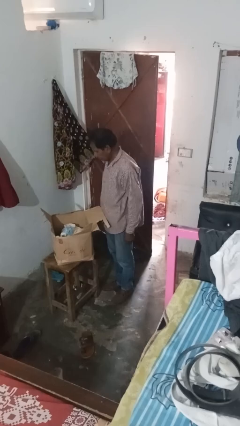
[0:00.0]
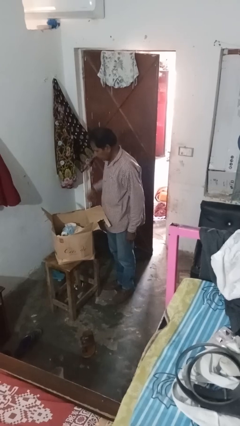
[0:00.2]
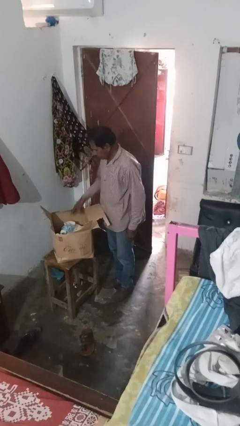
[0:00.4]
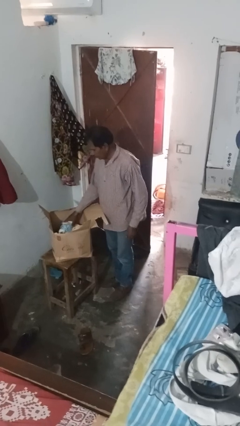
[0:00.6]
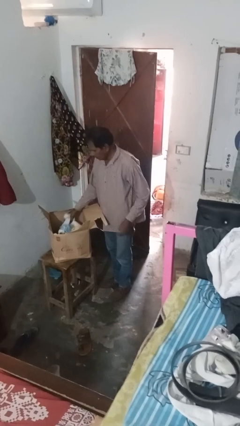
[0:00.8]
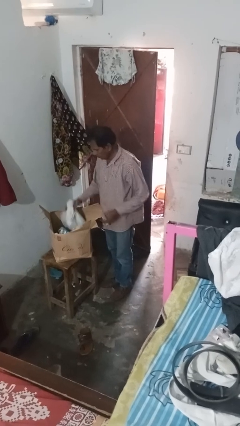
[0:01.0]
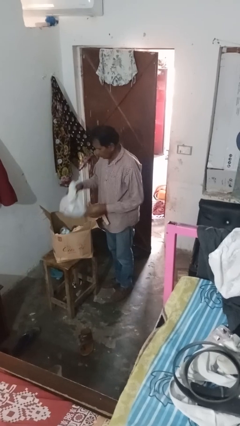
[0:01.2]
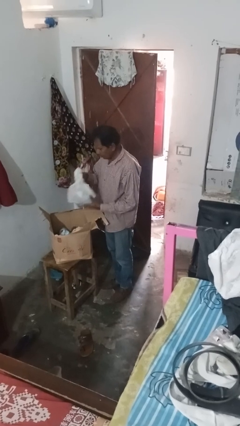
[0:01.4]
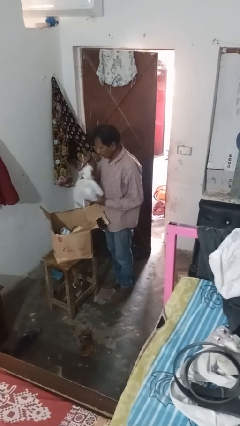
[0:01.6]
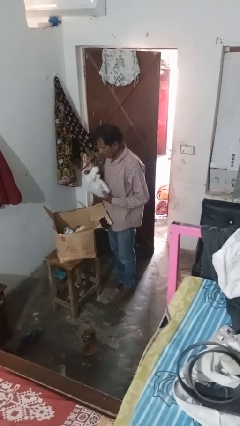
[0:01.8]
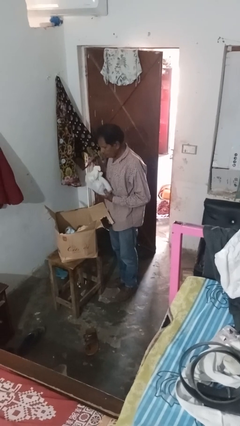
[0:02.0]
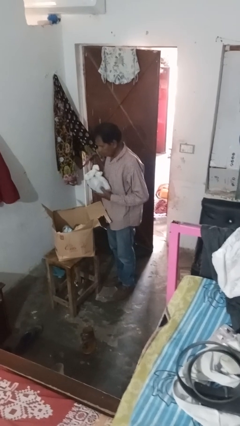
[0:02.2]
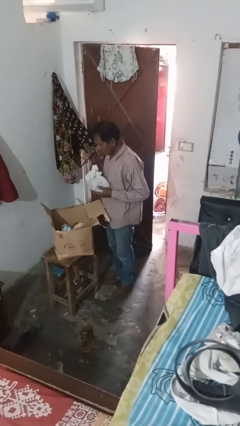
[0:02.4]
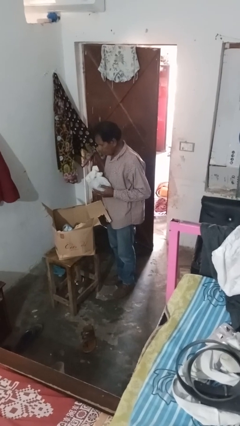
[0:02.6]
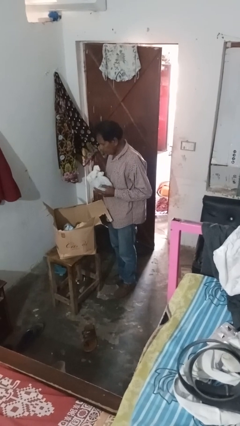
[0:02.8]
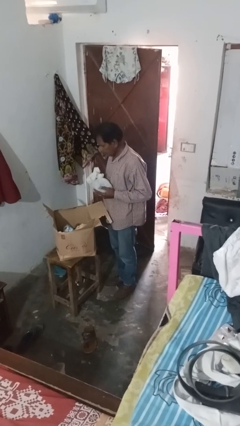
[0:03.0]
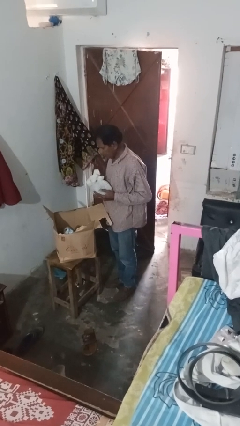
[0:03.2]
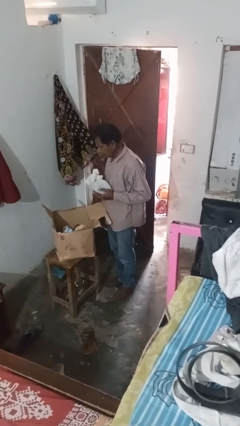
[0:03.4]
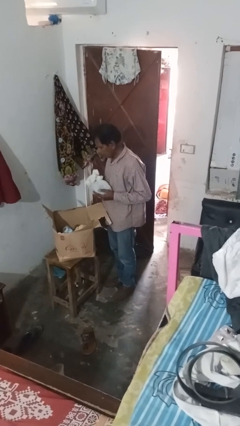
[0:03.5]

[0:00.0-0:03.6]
person takes object from box

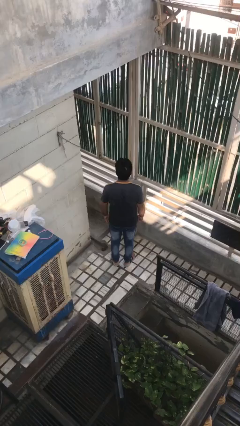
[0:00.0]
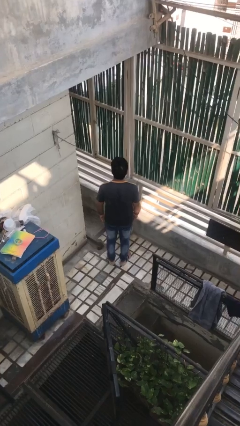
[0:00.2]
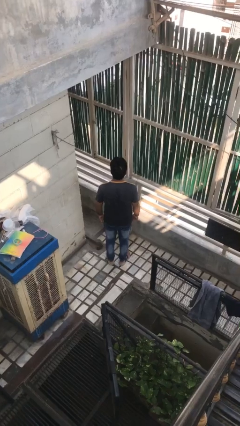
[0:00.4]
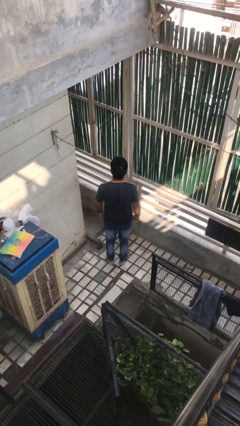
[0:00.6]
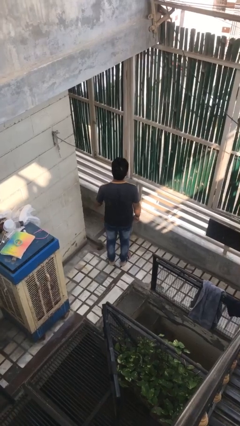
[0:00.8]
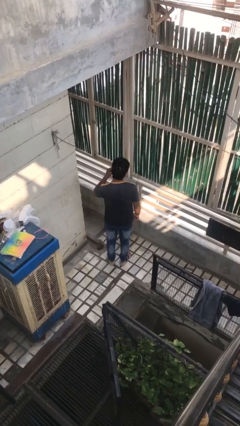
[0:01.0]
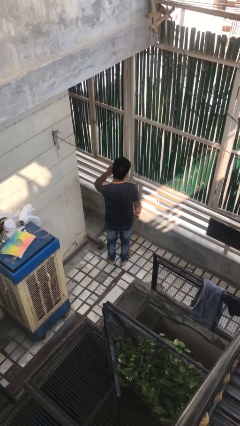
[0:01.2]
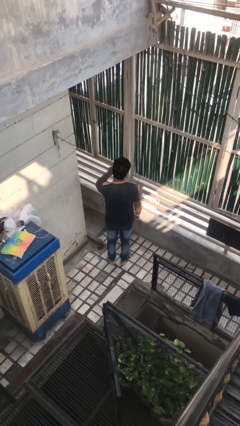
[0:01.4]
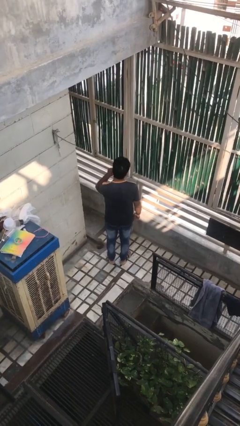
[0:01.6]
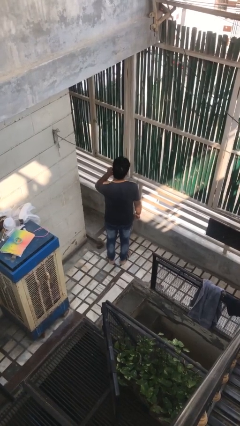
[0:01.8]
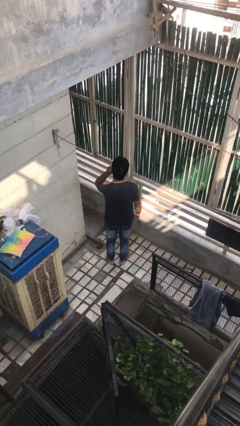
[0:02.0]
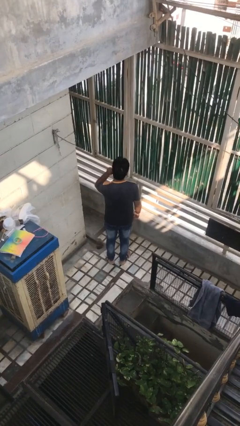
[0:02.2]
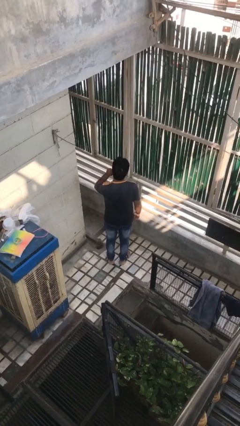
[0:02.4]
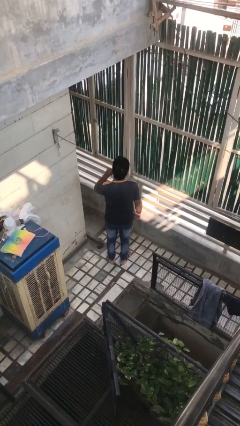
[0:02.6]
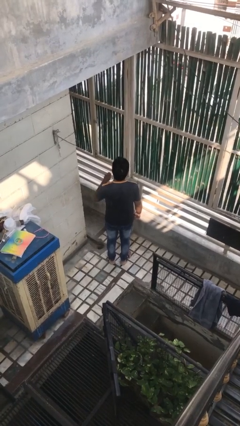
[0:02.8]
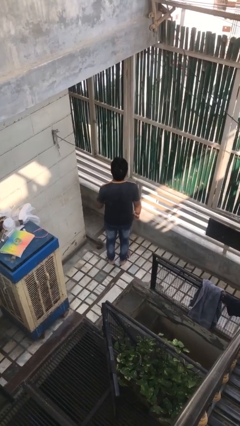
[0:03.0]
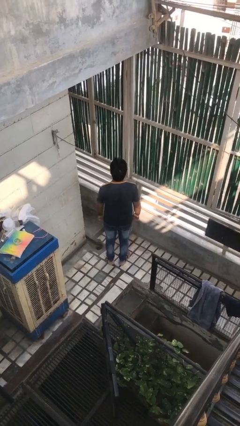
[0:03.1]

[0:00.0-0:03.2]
person touches earlobe

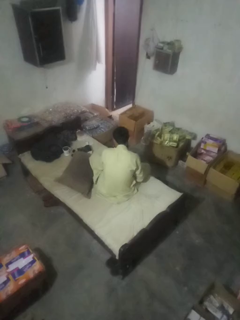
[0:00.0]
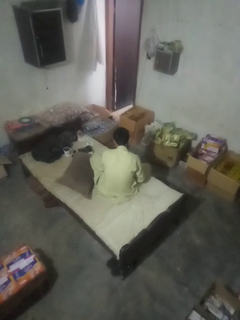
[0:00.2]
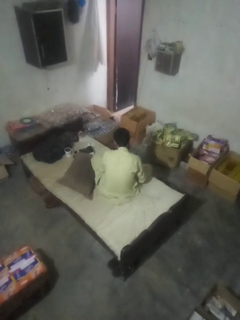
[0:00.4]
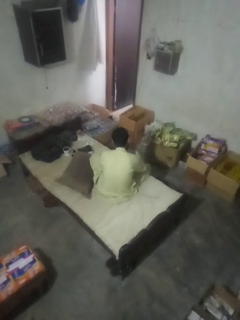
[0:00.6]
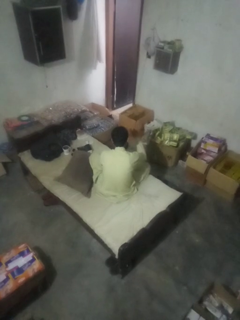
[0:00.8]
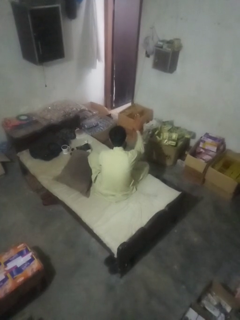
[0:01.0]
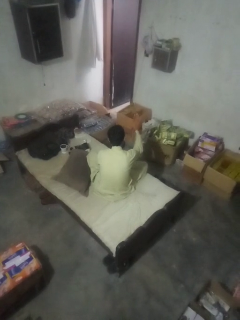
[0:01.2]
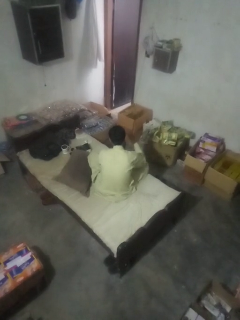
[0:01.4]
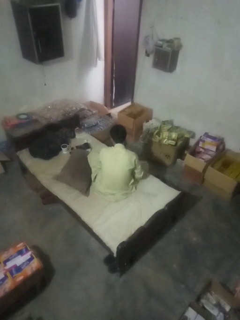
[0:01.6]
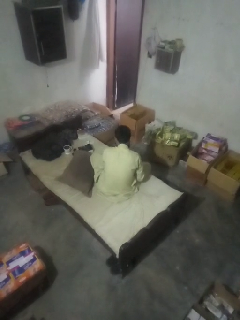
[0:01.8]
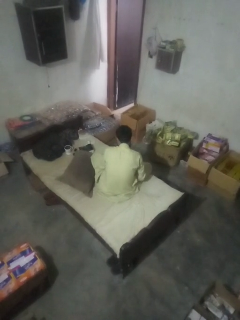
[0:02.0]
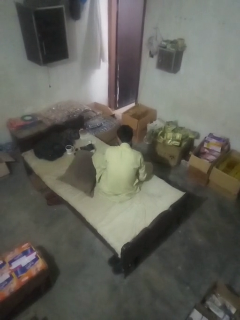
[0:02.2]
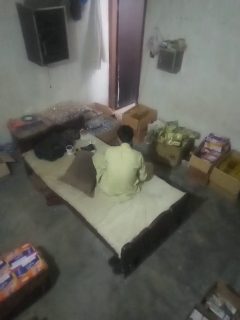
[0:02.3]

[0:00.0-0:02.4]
person gestures stop

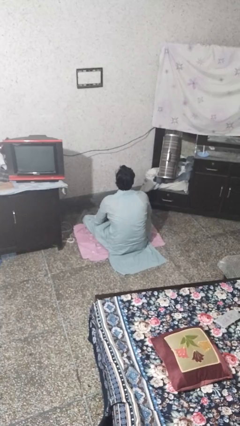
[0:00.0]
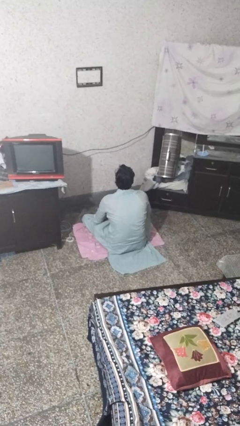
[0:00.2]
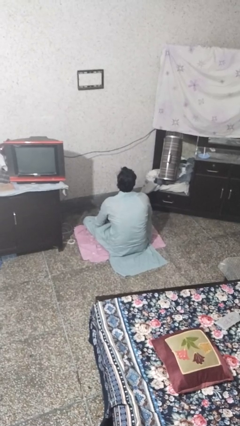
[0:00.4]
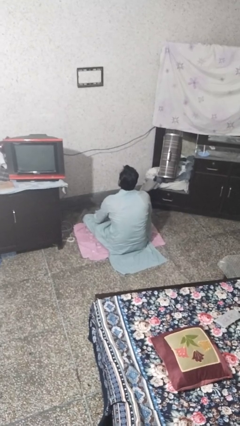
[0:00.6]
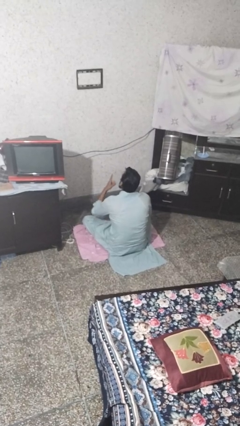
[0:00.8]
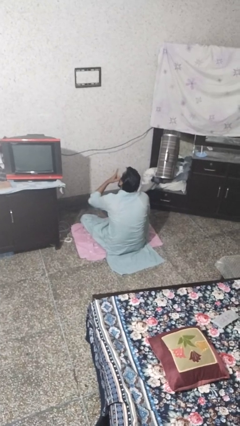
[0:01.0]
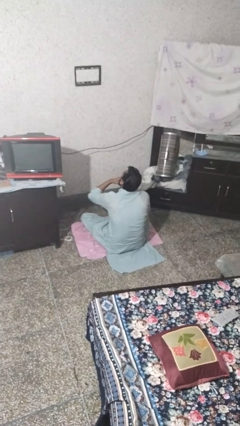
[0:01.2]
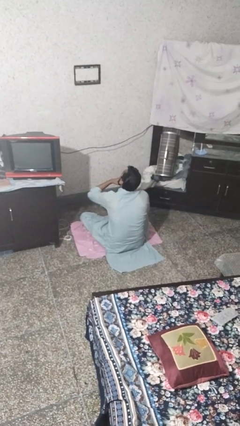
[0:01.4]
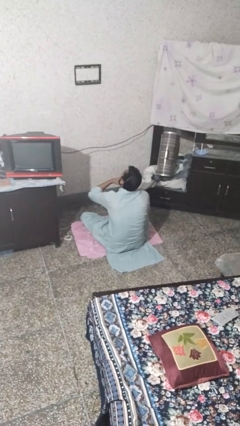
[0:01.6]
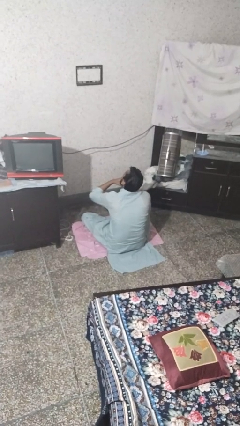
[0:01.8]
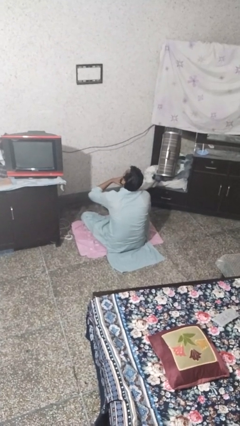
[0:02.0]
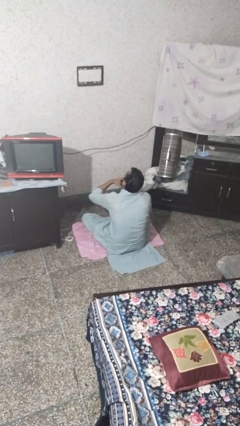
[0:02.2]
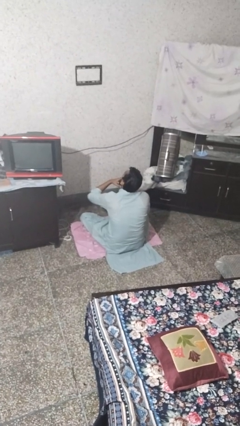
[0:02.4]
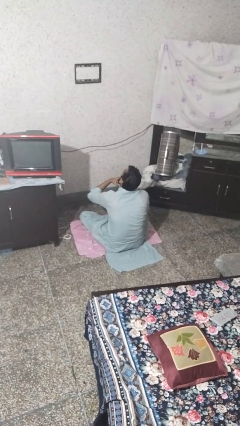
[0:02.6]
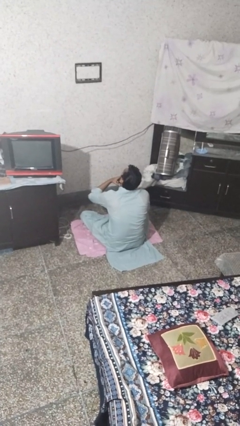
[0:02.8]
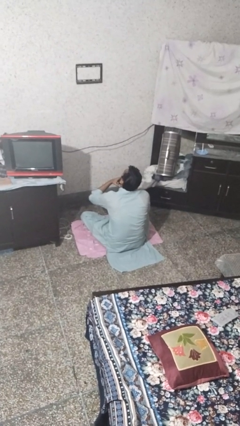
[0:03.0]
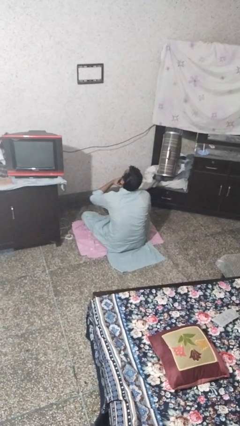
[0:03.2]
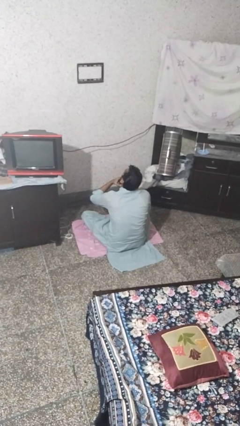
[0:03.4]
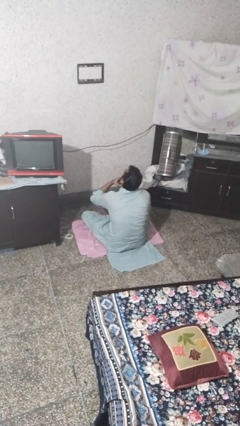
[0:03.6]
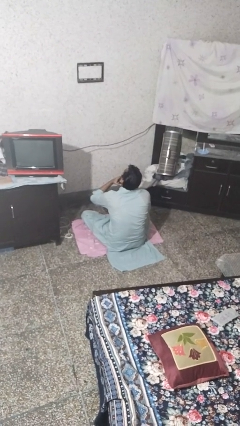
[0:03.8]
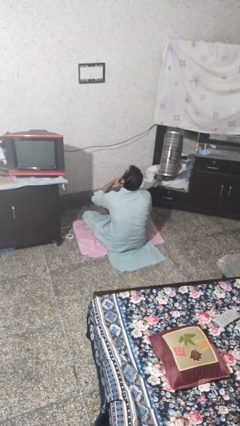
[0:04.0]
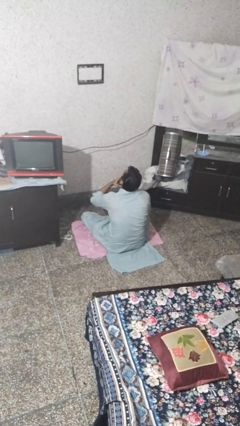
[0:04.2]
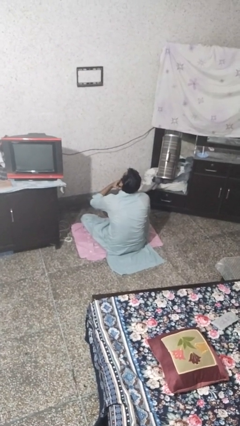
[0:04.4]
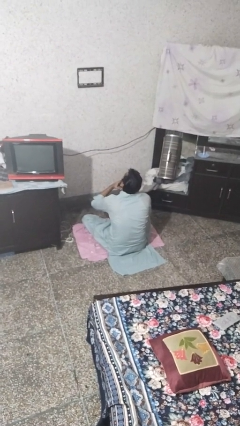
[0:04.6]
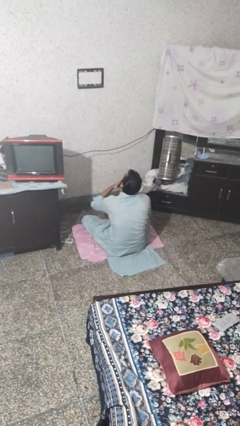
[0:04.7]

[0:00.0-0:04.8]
person licks fingers

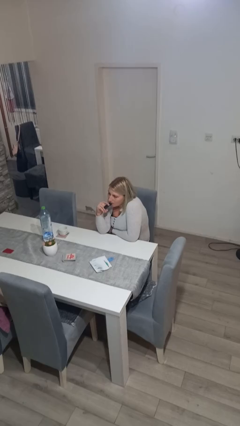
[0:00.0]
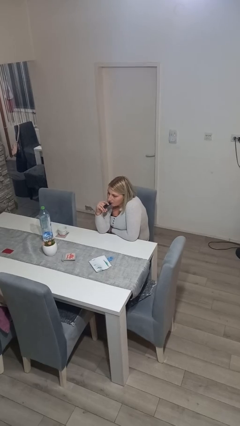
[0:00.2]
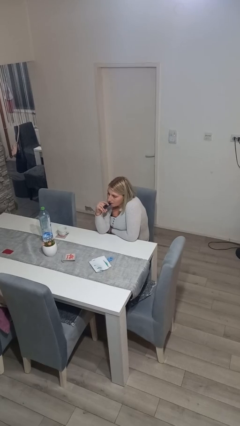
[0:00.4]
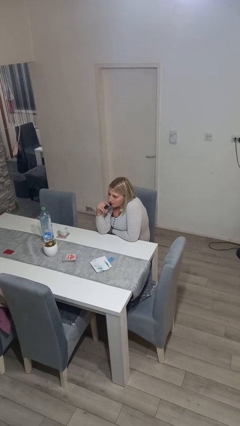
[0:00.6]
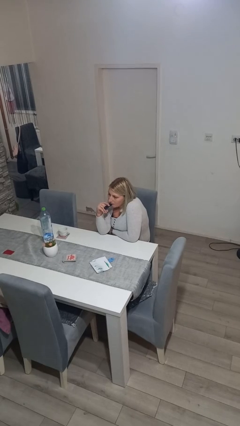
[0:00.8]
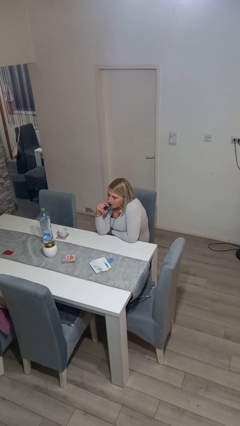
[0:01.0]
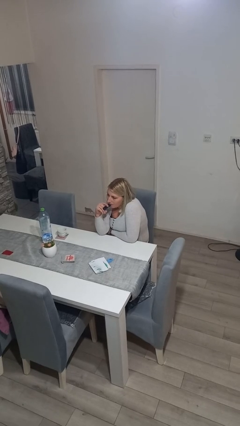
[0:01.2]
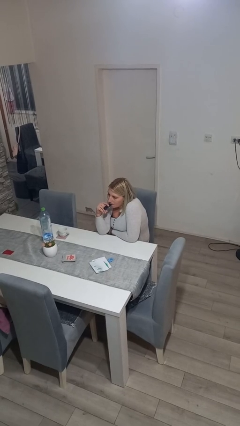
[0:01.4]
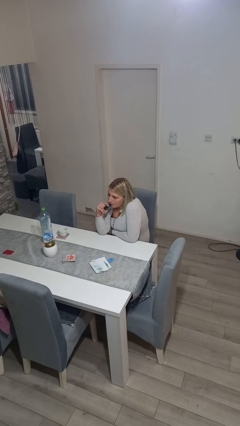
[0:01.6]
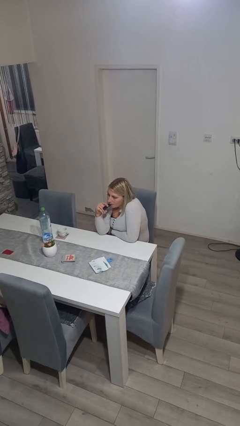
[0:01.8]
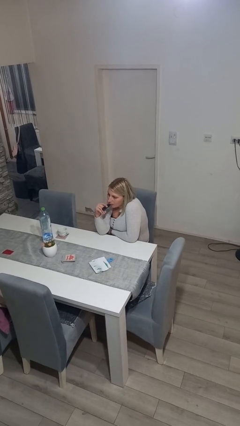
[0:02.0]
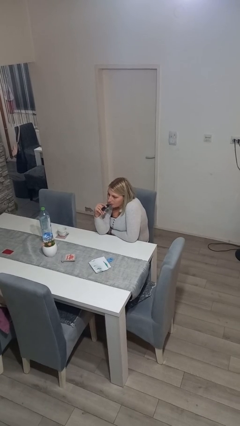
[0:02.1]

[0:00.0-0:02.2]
person vapes

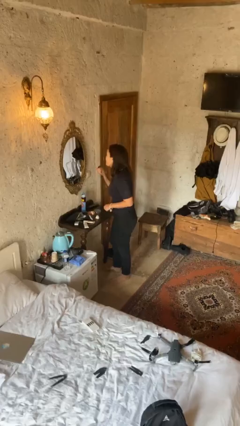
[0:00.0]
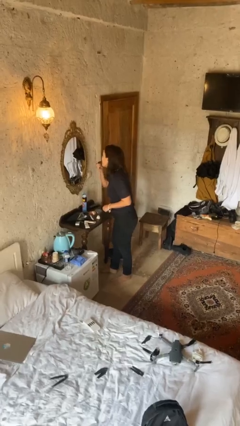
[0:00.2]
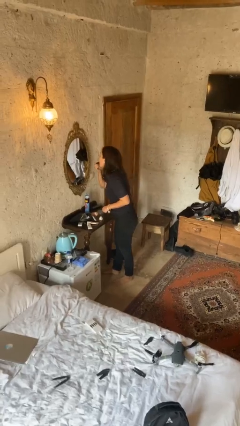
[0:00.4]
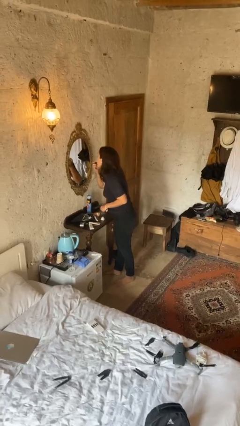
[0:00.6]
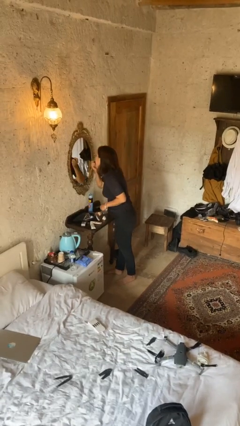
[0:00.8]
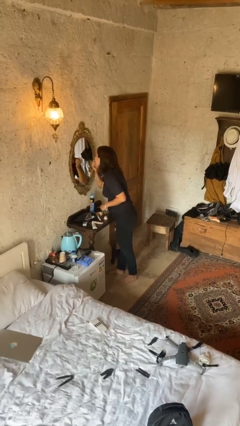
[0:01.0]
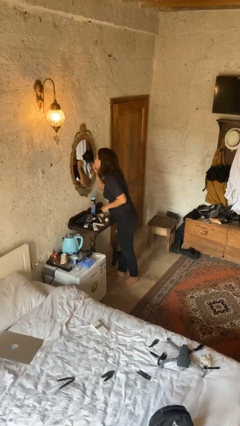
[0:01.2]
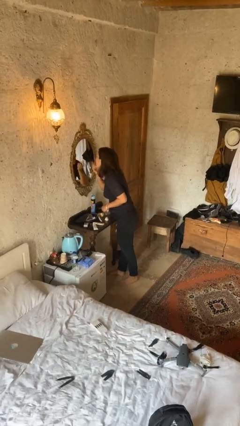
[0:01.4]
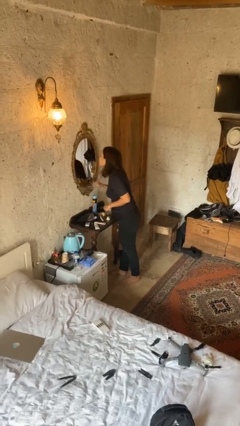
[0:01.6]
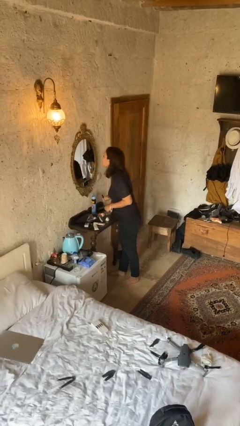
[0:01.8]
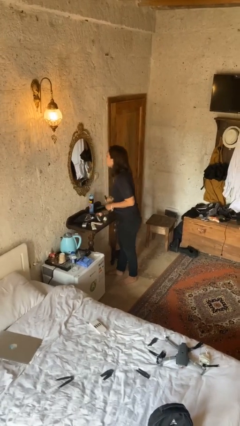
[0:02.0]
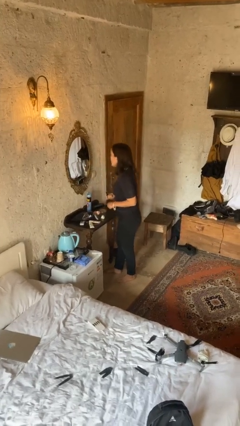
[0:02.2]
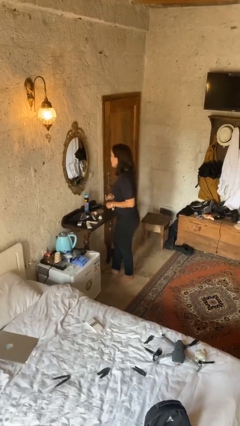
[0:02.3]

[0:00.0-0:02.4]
person applies lip makeup
